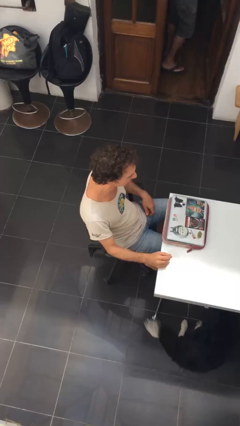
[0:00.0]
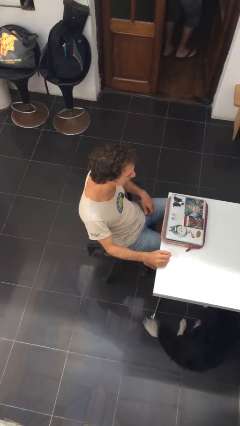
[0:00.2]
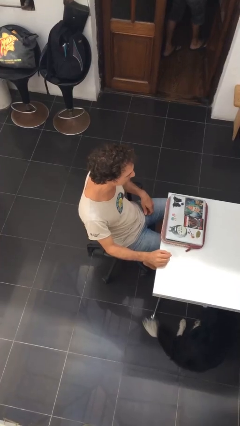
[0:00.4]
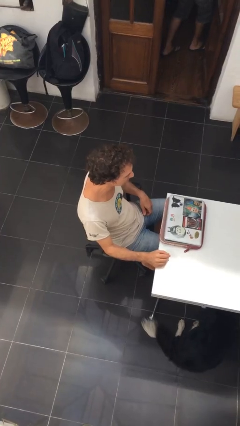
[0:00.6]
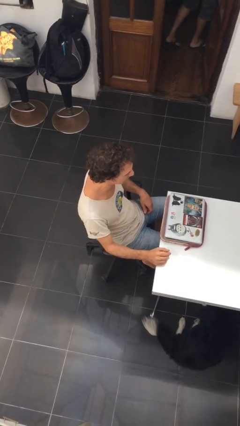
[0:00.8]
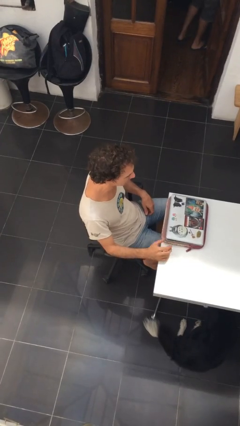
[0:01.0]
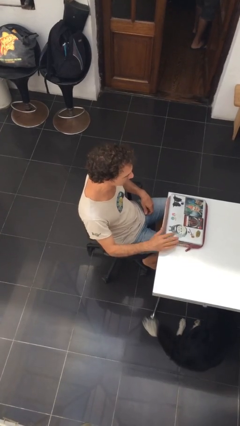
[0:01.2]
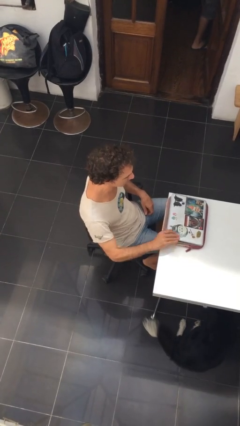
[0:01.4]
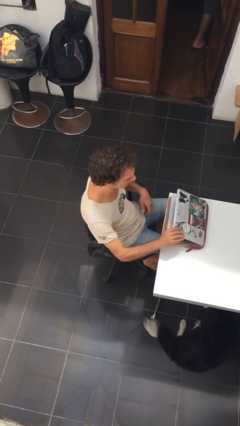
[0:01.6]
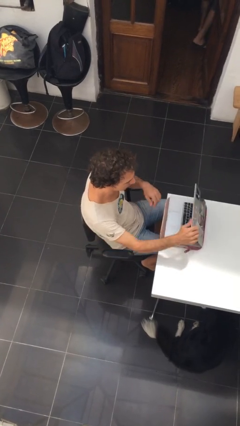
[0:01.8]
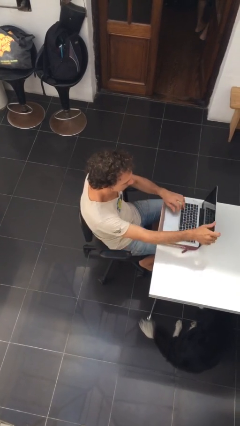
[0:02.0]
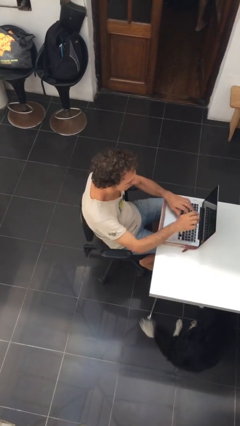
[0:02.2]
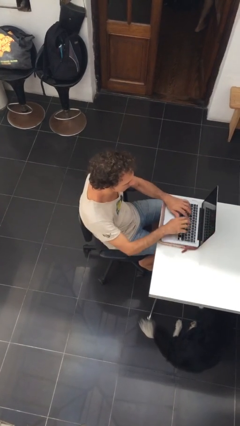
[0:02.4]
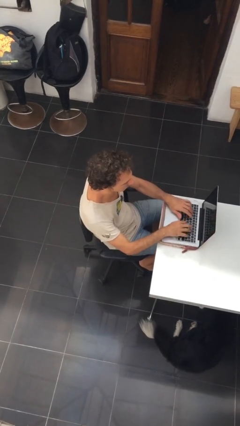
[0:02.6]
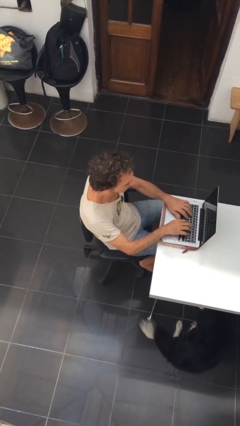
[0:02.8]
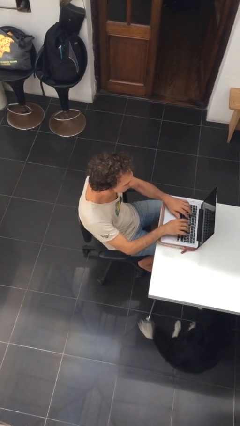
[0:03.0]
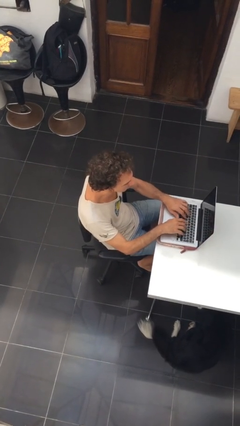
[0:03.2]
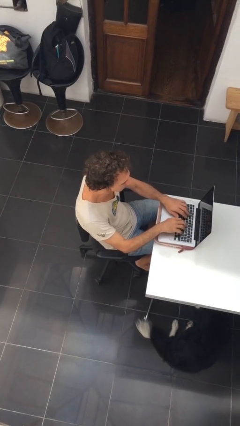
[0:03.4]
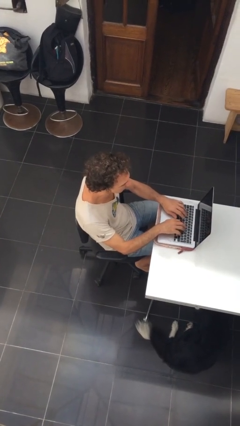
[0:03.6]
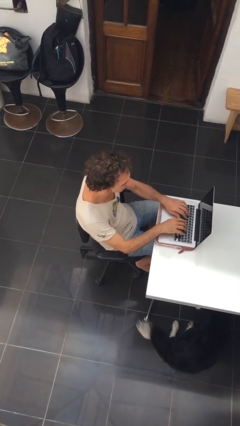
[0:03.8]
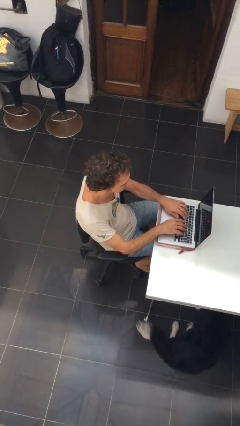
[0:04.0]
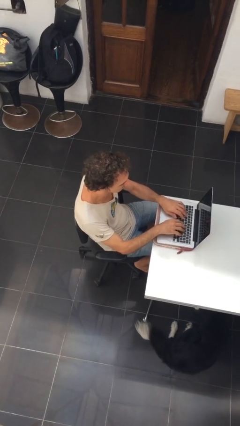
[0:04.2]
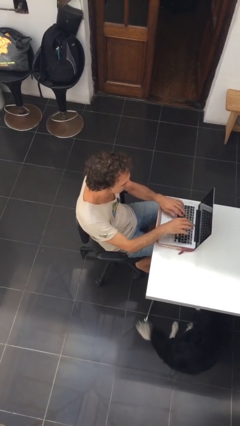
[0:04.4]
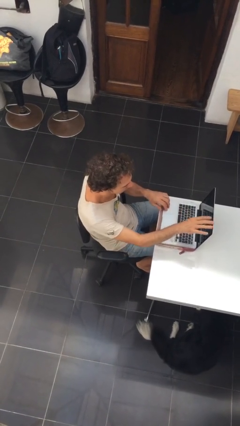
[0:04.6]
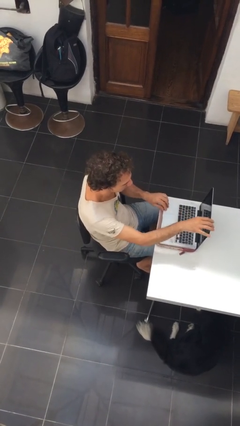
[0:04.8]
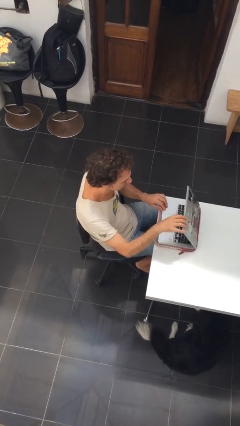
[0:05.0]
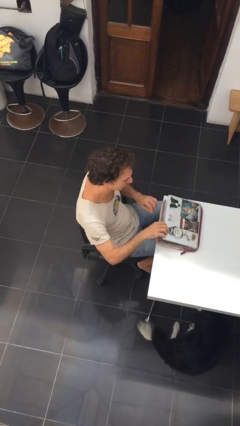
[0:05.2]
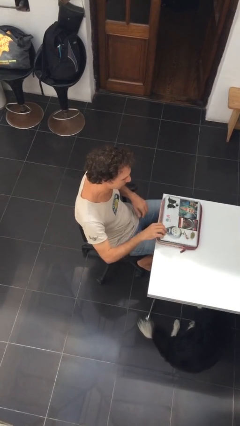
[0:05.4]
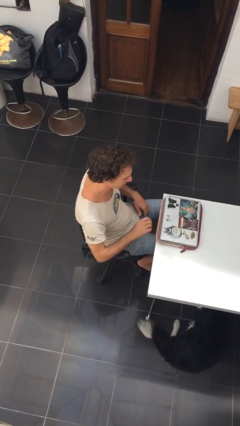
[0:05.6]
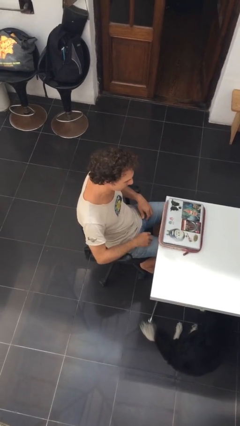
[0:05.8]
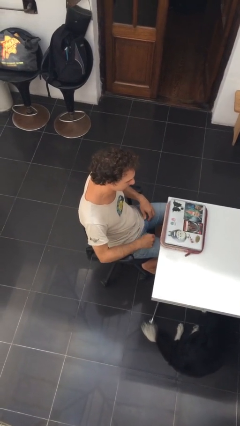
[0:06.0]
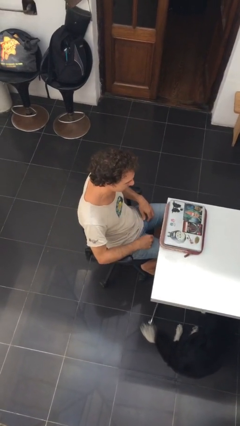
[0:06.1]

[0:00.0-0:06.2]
person interacts with laptop

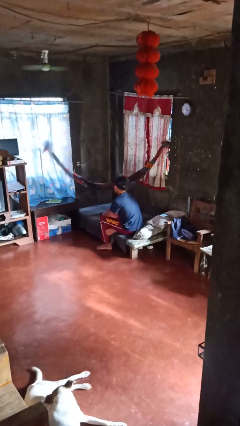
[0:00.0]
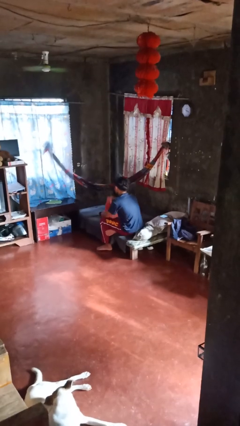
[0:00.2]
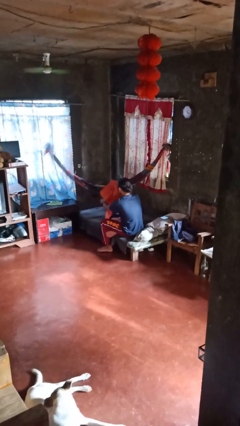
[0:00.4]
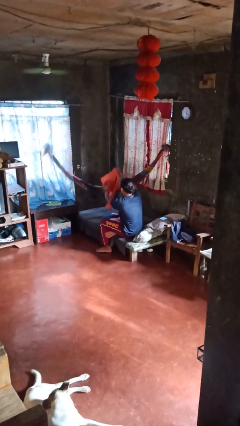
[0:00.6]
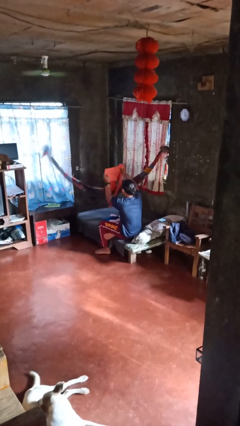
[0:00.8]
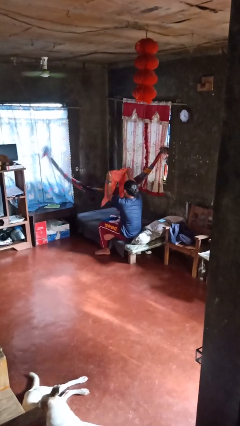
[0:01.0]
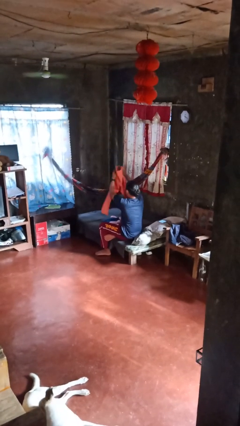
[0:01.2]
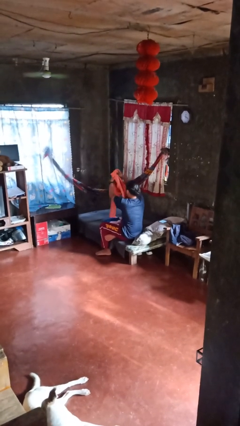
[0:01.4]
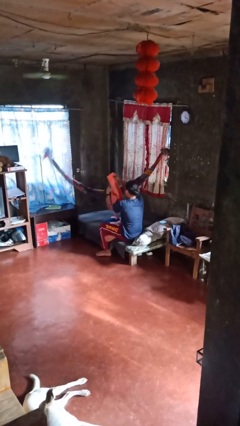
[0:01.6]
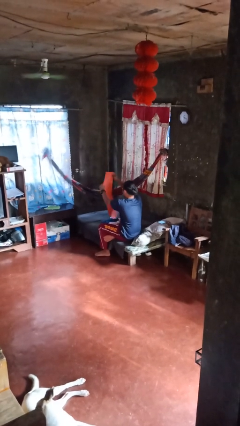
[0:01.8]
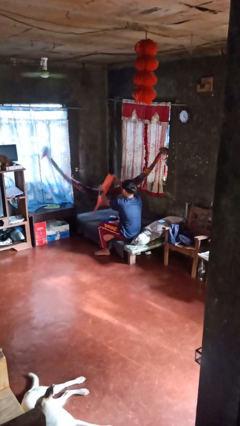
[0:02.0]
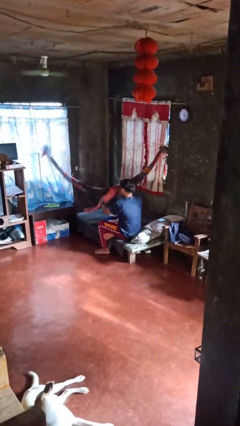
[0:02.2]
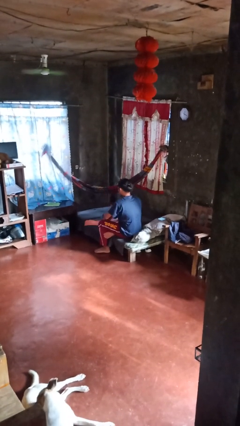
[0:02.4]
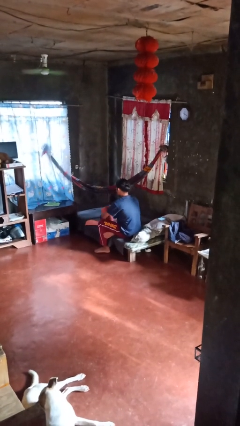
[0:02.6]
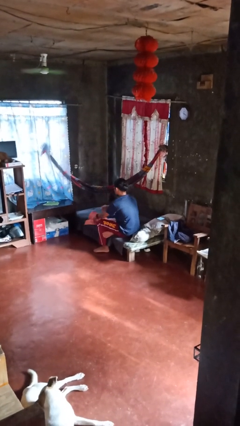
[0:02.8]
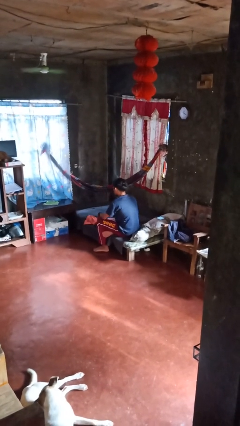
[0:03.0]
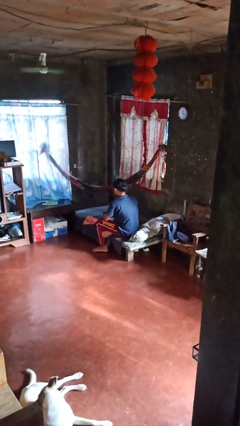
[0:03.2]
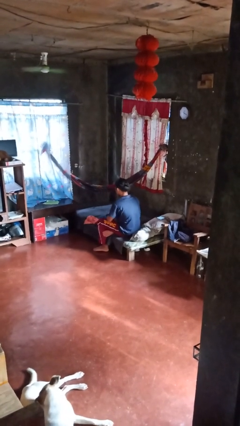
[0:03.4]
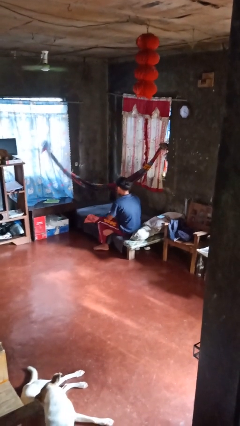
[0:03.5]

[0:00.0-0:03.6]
person folds pants

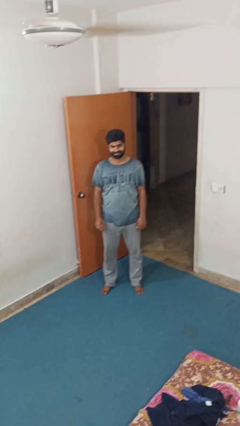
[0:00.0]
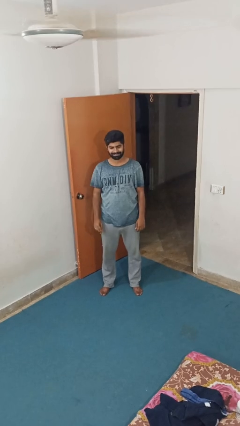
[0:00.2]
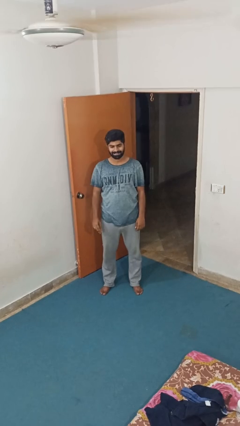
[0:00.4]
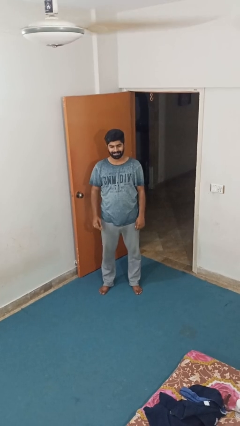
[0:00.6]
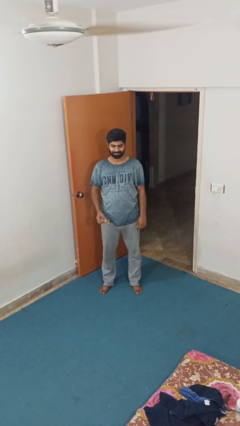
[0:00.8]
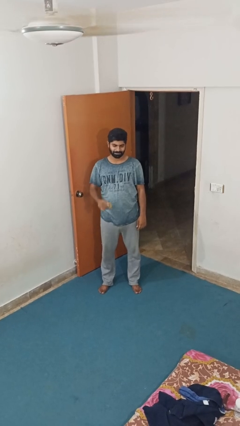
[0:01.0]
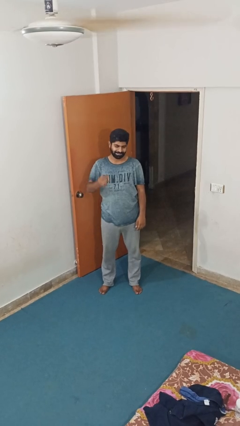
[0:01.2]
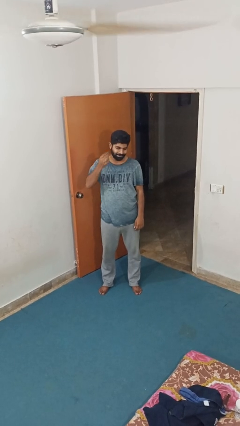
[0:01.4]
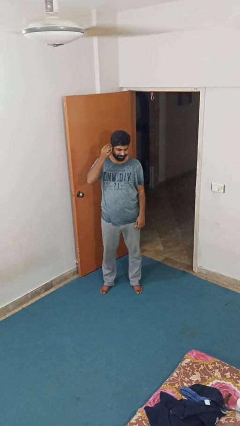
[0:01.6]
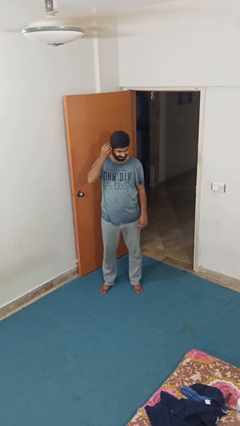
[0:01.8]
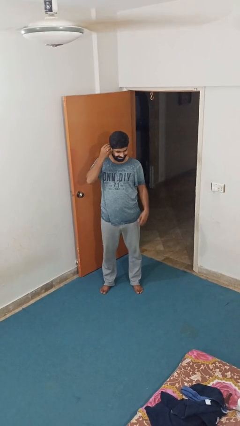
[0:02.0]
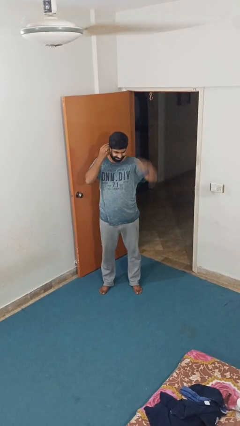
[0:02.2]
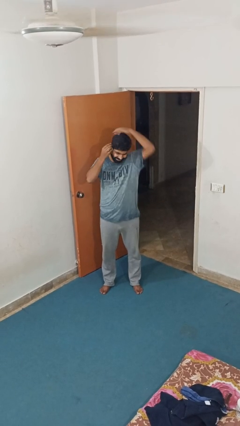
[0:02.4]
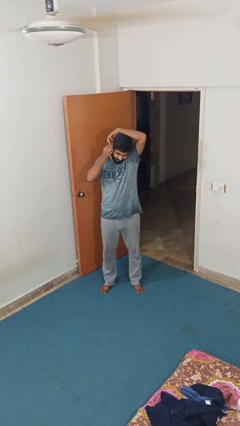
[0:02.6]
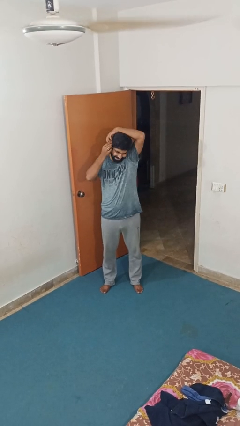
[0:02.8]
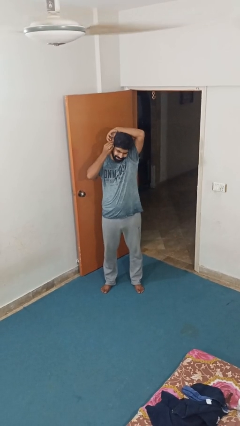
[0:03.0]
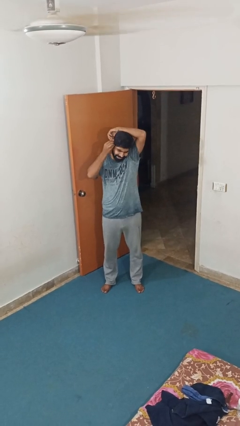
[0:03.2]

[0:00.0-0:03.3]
person puts on earrings

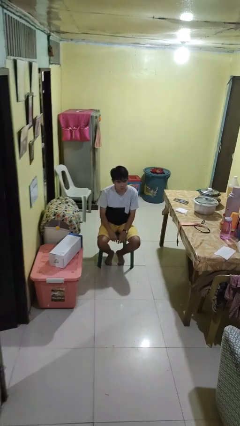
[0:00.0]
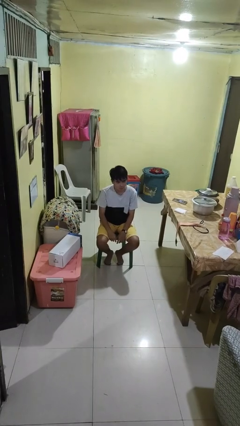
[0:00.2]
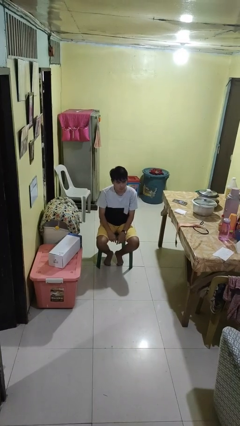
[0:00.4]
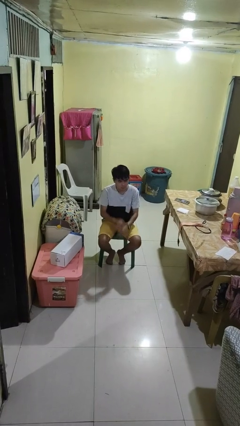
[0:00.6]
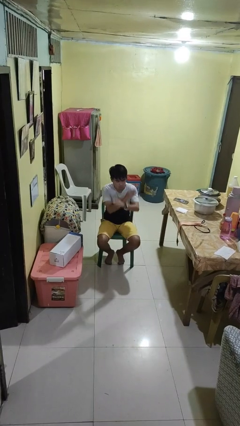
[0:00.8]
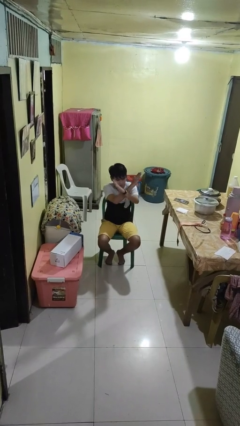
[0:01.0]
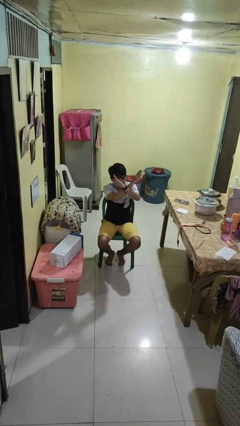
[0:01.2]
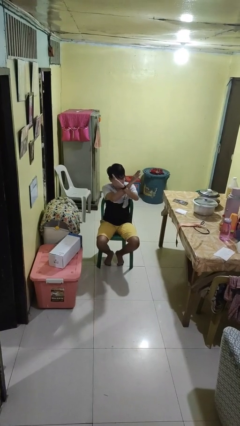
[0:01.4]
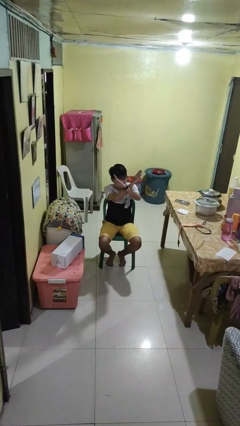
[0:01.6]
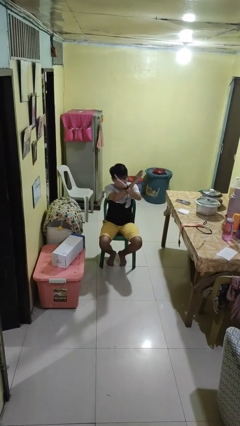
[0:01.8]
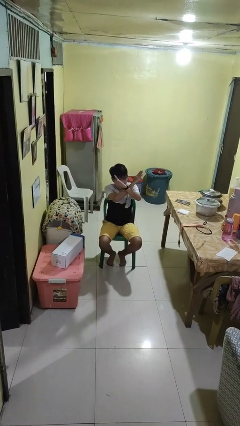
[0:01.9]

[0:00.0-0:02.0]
person gestures arms x

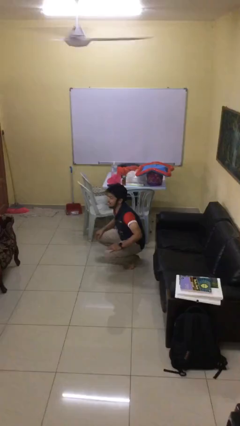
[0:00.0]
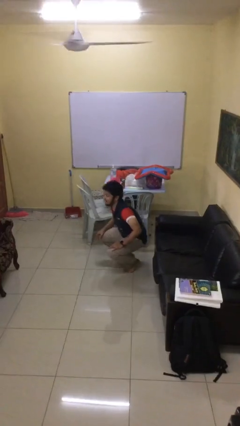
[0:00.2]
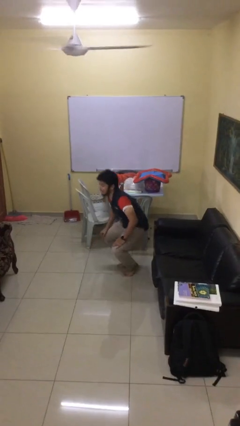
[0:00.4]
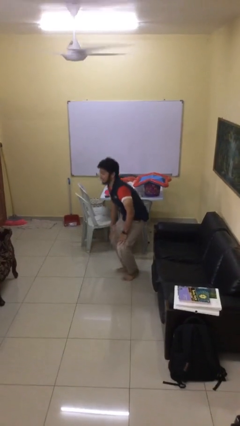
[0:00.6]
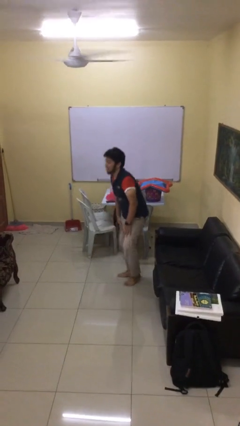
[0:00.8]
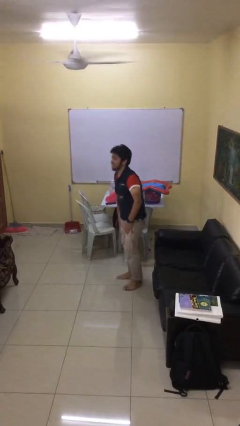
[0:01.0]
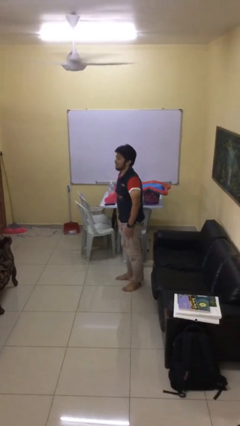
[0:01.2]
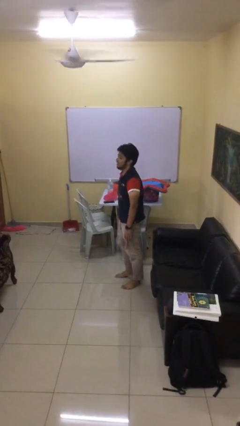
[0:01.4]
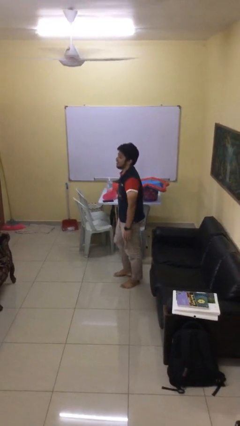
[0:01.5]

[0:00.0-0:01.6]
person stands up

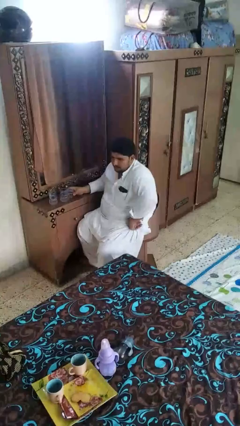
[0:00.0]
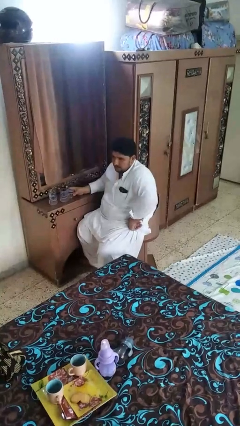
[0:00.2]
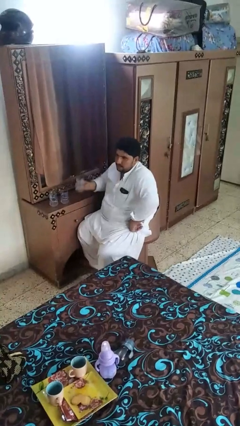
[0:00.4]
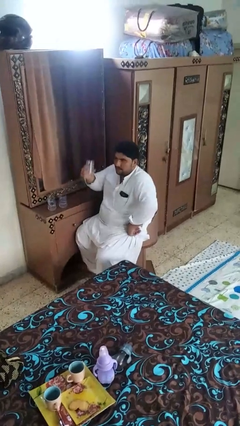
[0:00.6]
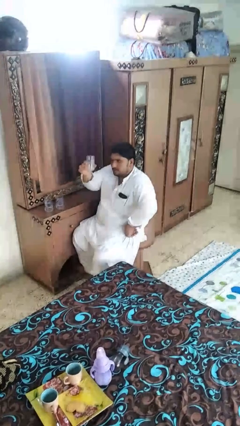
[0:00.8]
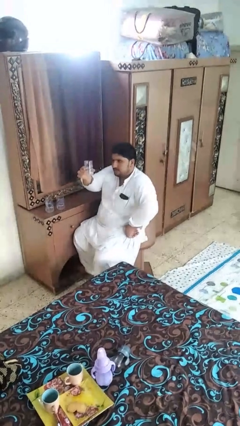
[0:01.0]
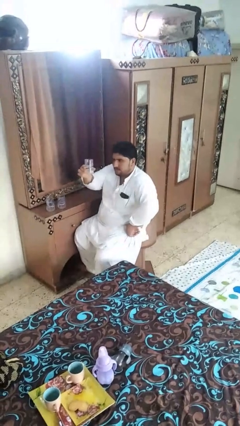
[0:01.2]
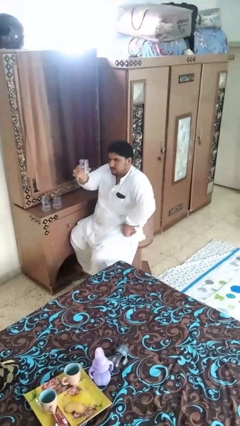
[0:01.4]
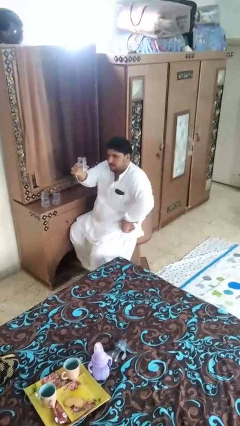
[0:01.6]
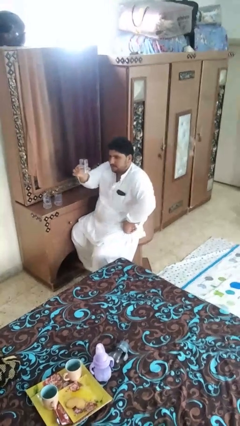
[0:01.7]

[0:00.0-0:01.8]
person picks up object from table
